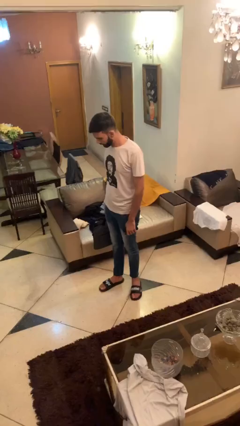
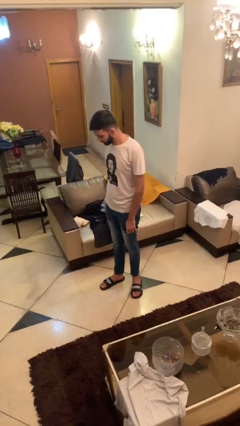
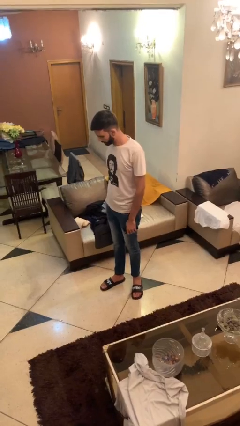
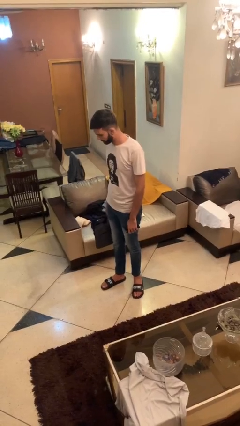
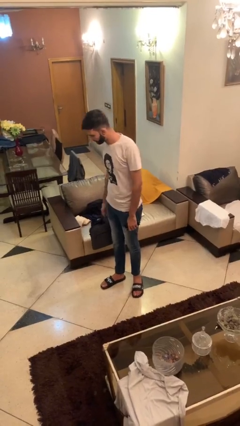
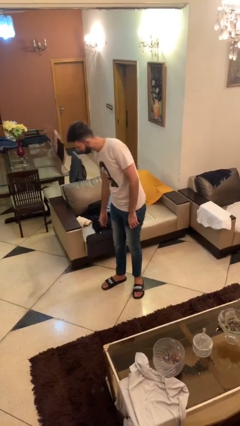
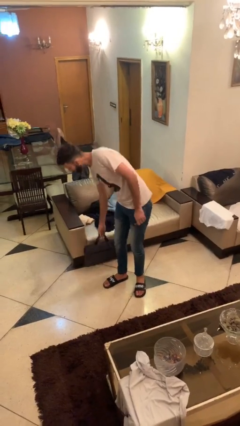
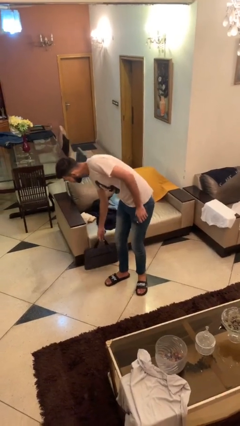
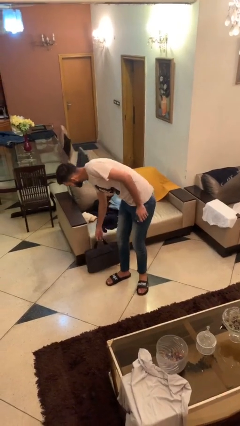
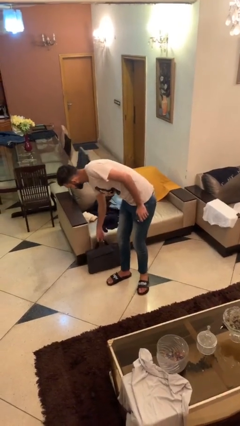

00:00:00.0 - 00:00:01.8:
person puts down object on floor

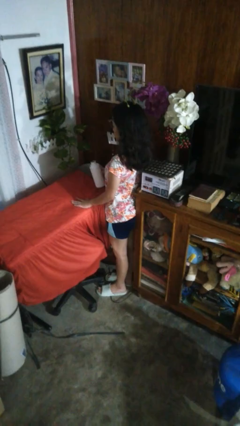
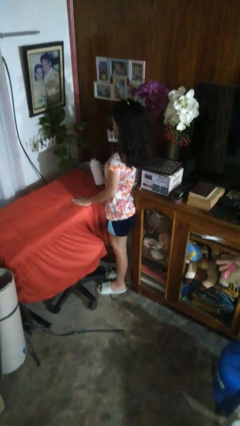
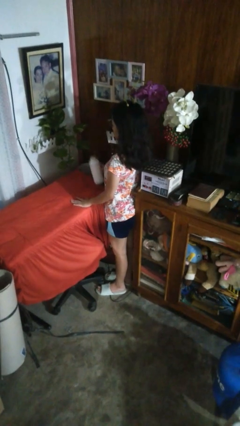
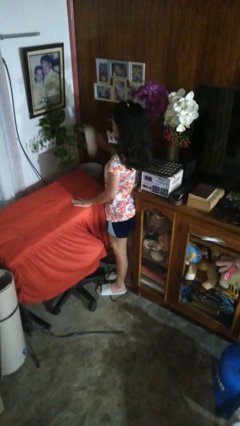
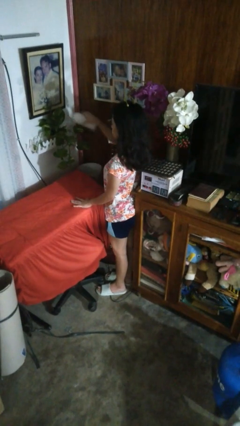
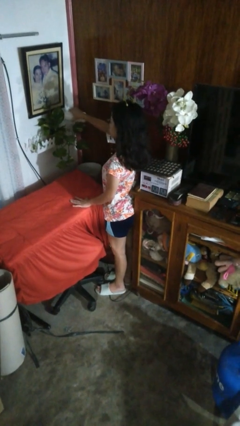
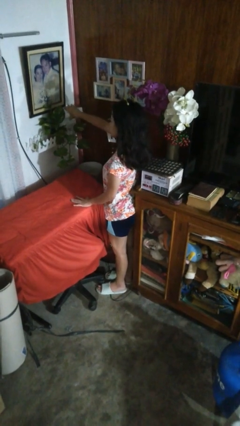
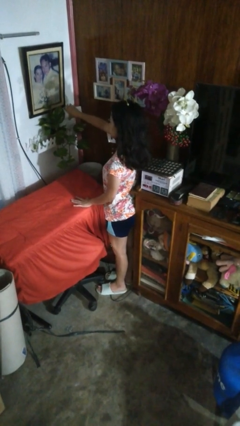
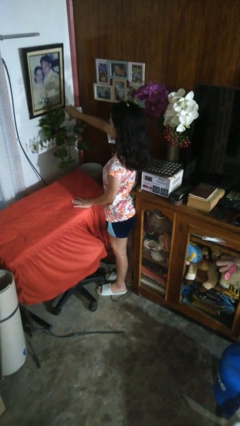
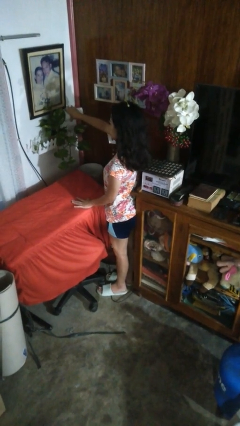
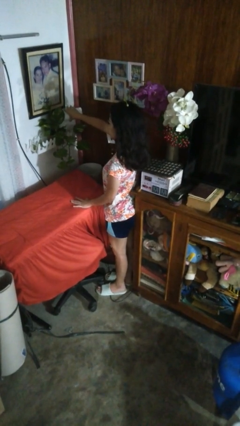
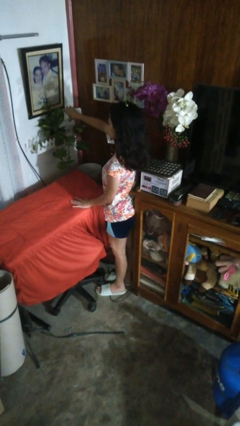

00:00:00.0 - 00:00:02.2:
person waters houseplant

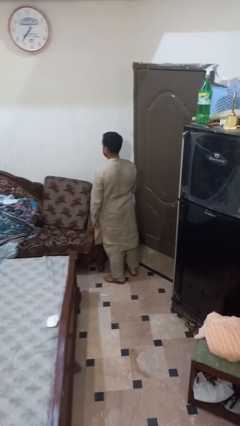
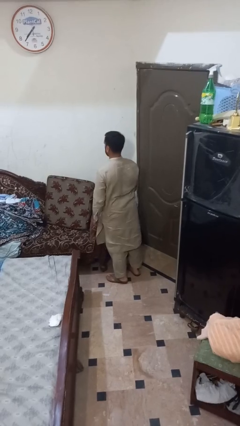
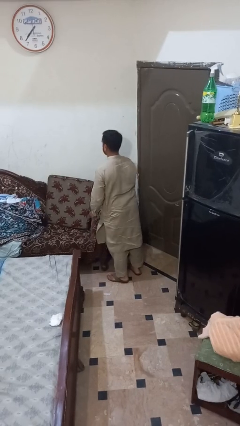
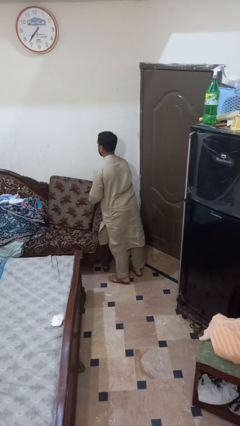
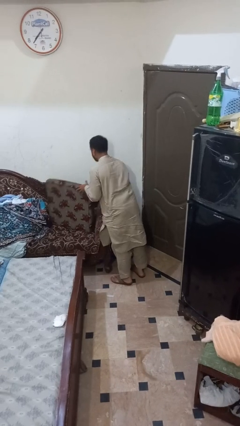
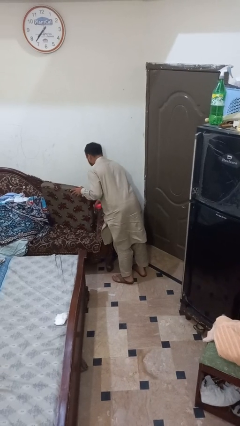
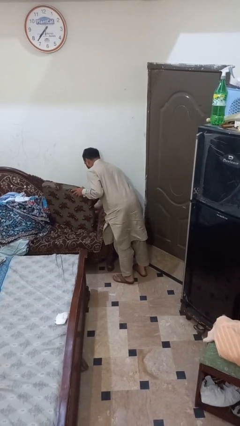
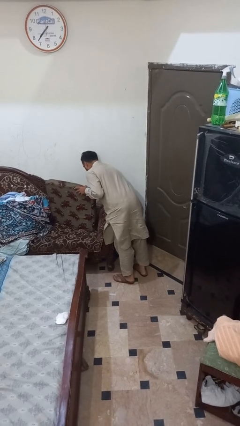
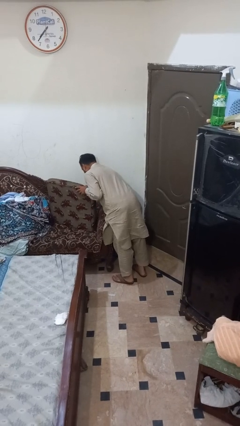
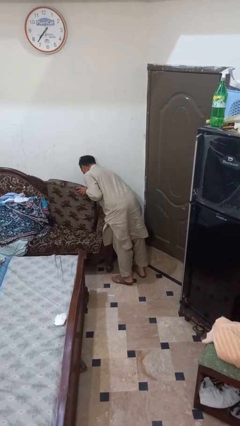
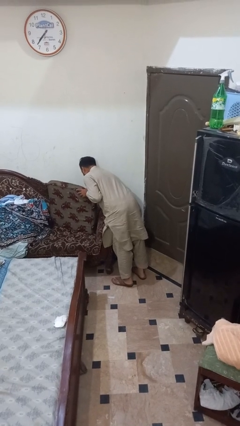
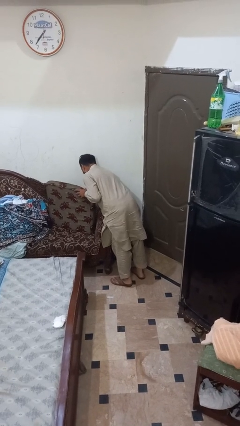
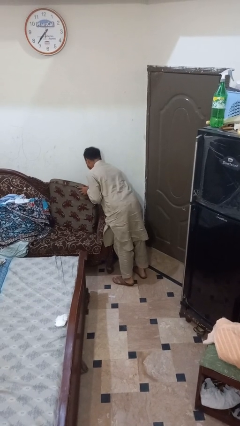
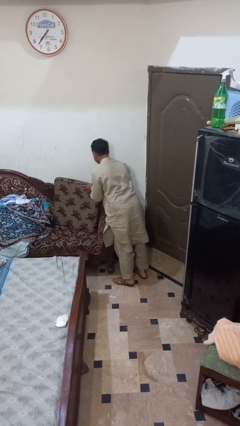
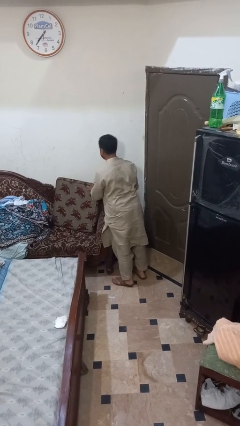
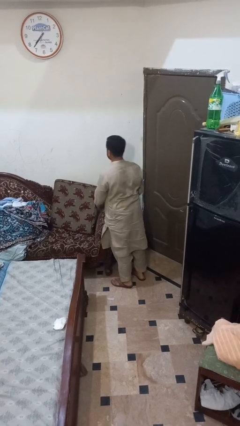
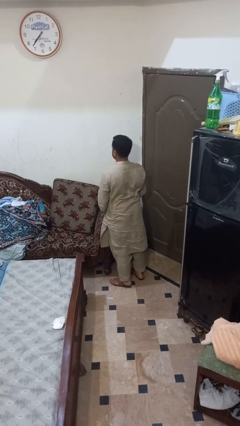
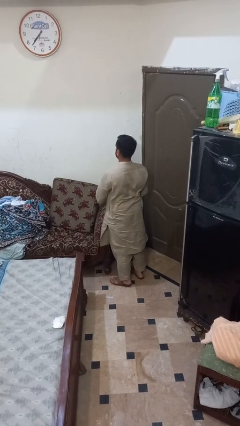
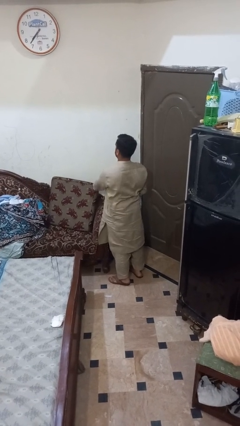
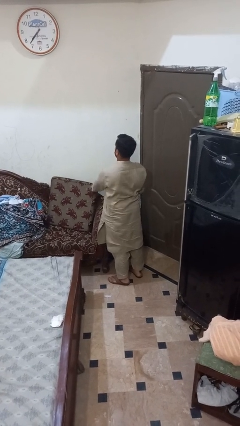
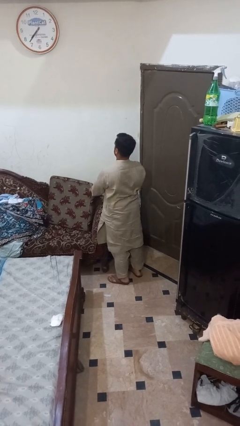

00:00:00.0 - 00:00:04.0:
person searches in couch

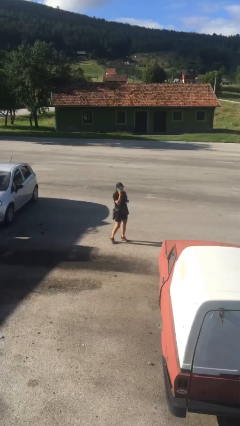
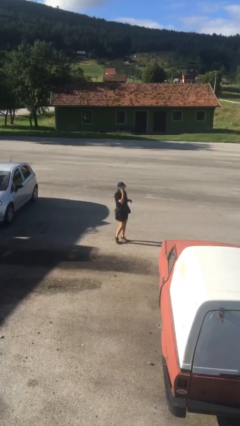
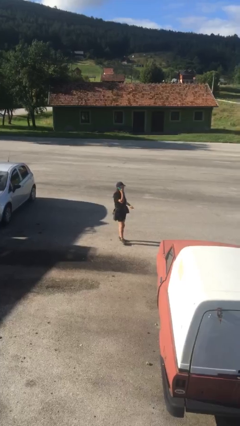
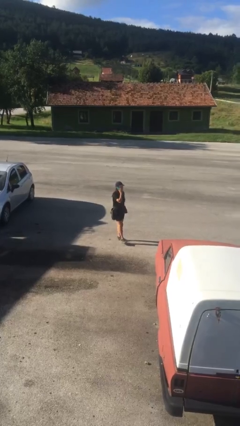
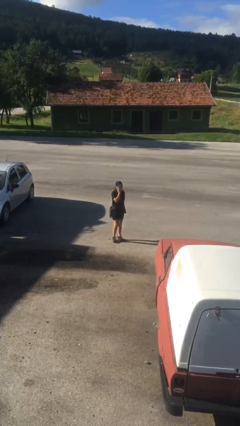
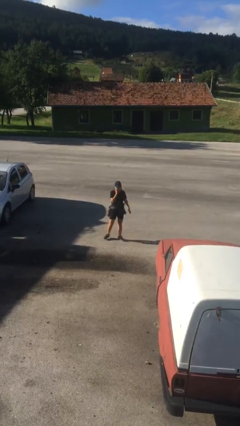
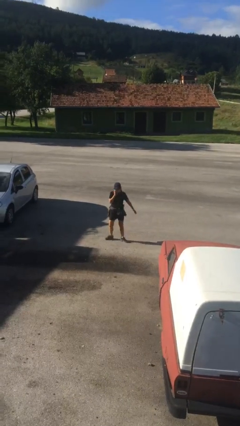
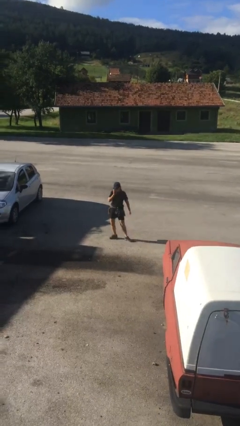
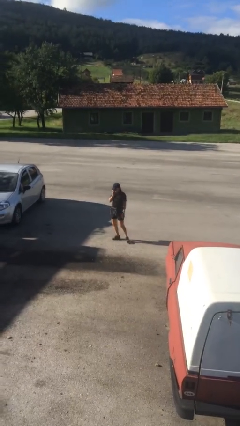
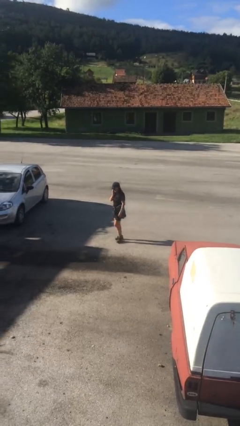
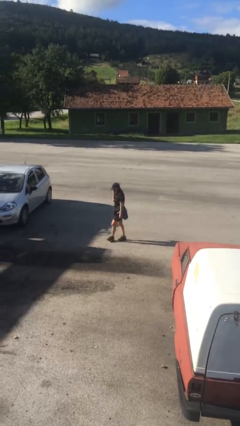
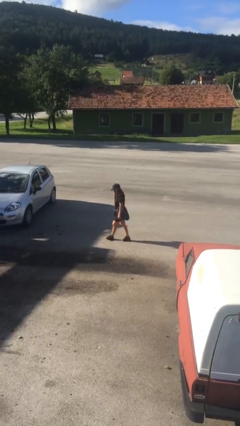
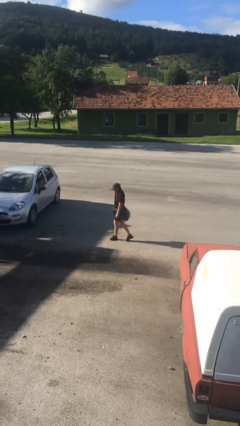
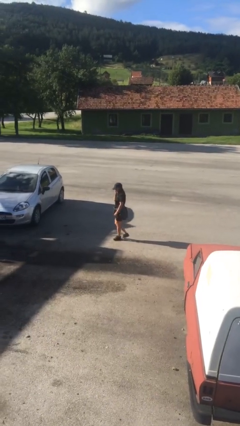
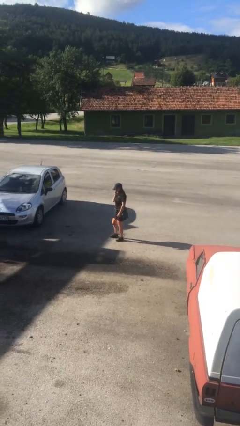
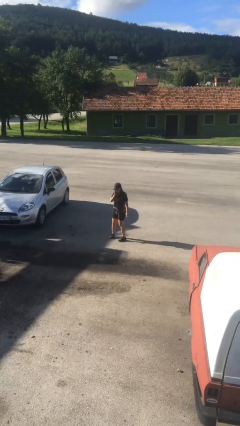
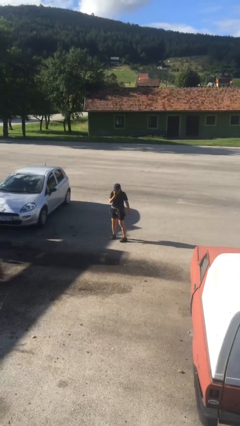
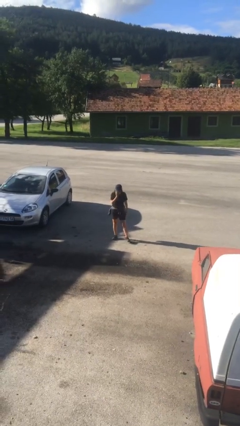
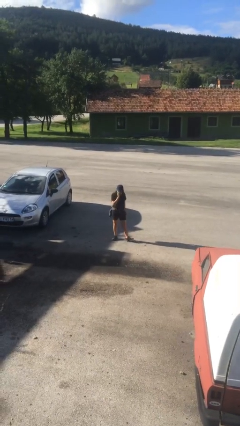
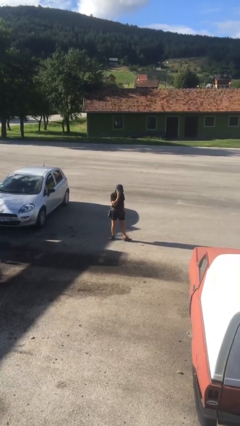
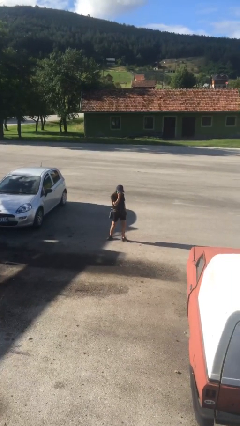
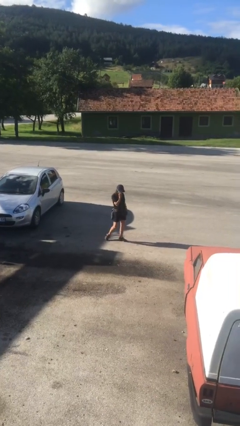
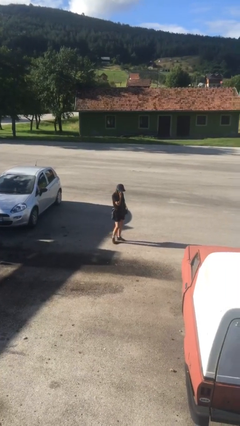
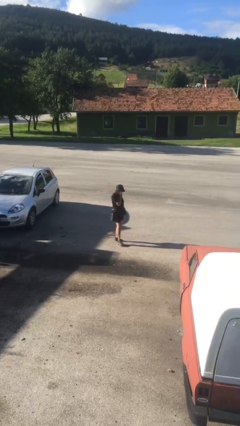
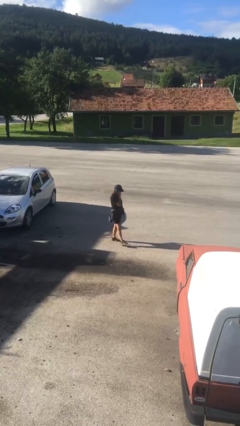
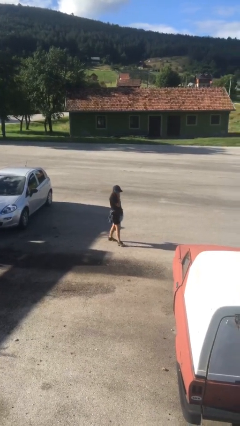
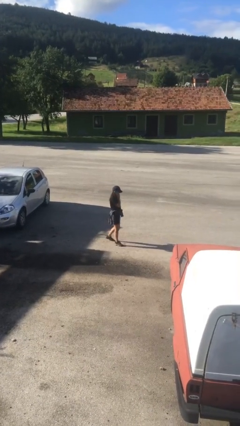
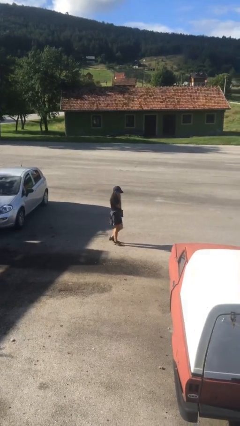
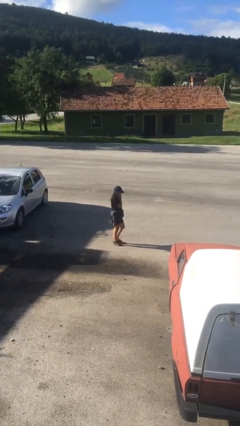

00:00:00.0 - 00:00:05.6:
person talks on phone

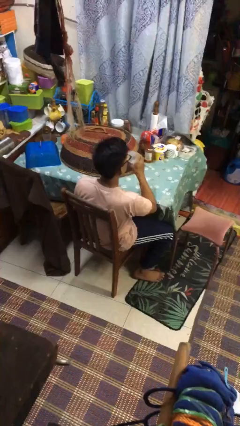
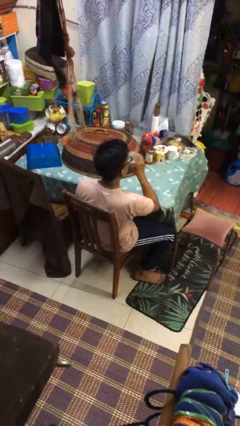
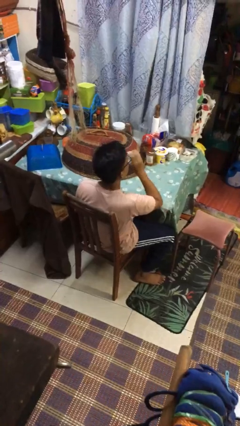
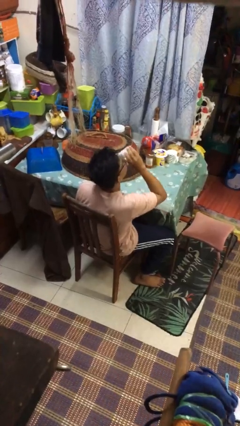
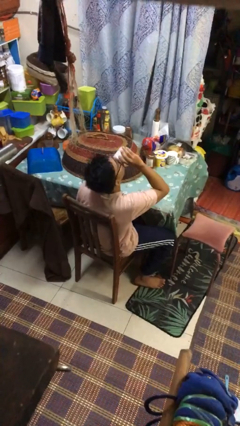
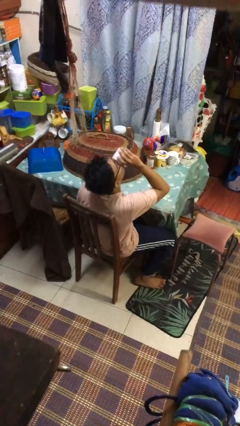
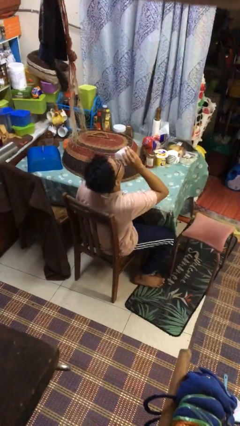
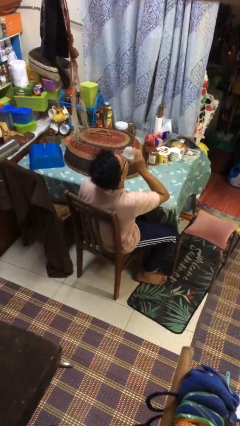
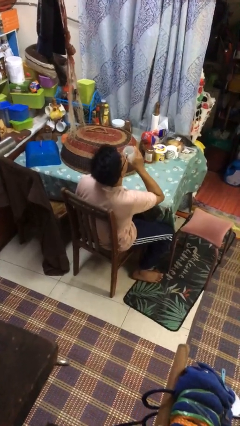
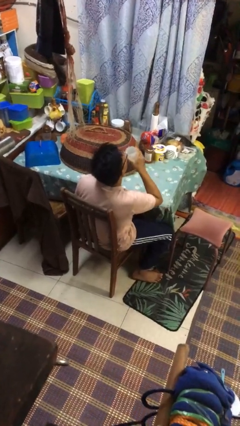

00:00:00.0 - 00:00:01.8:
person drinks from shotglass

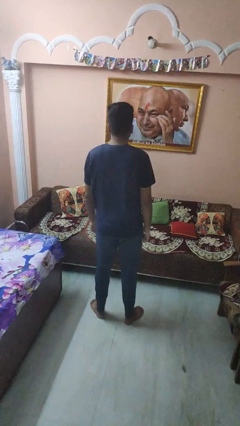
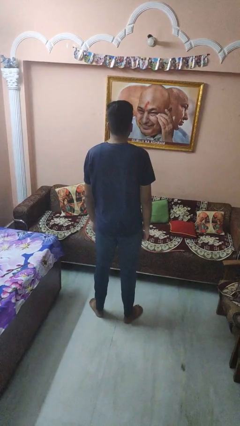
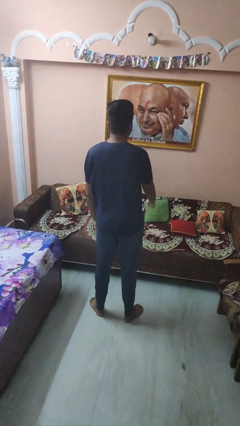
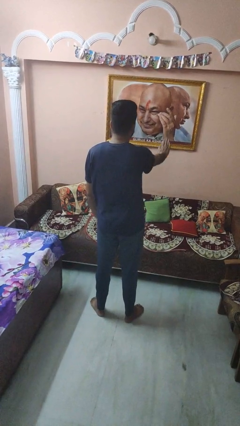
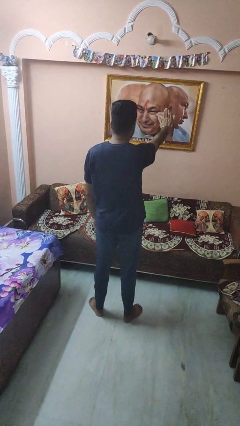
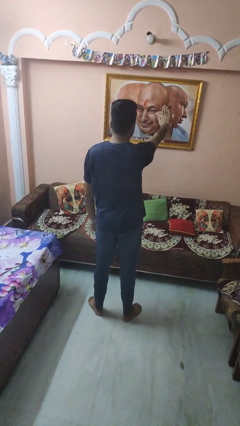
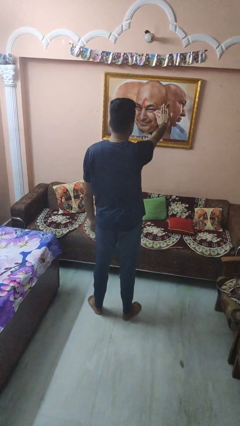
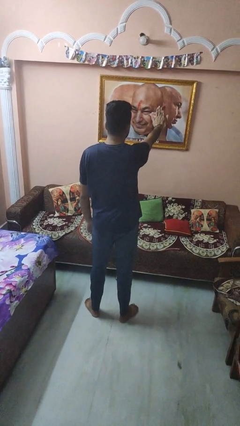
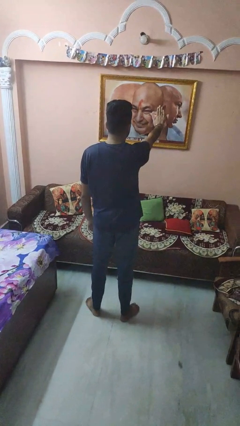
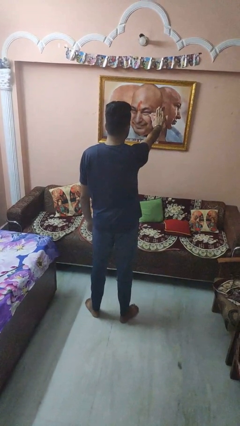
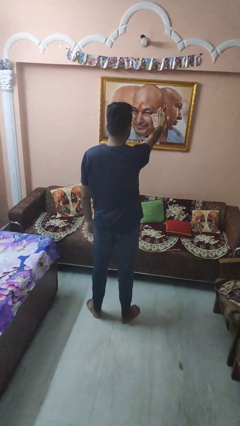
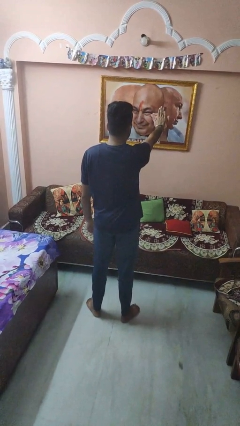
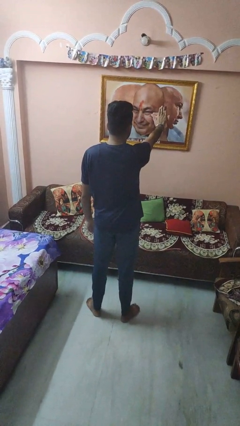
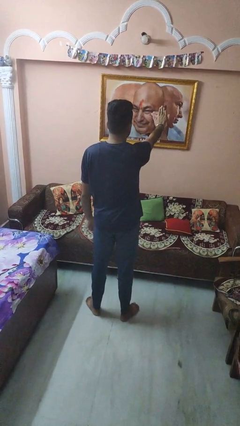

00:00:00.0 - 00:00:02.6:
person gestures stop
